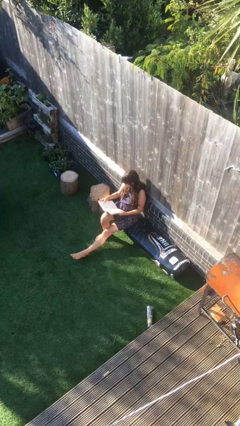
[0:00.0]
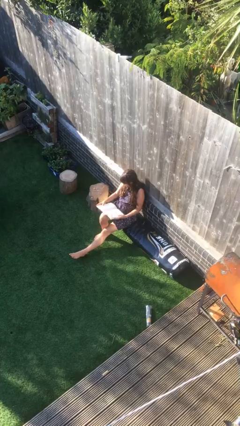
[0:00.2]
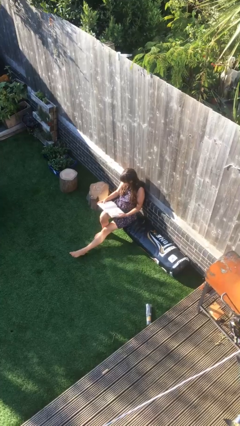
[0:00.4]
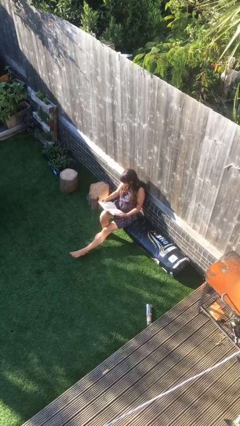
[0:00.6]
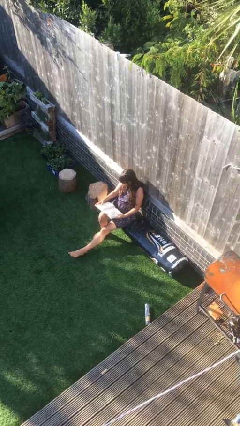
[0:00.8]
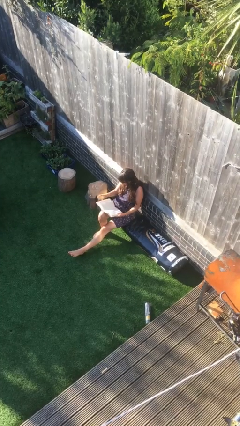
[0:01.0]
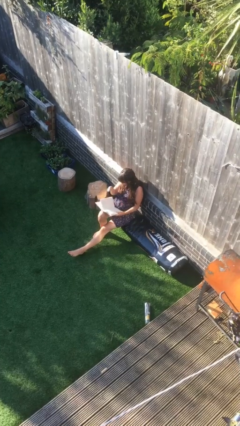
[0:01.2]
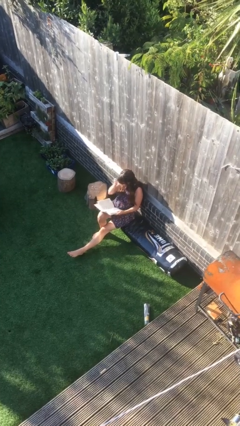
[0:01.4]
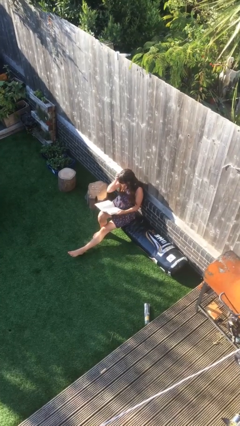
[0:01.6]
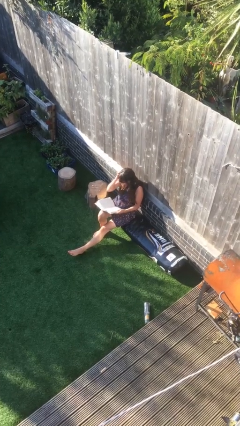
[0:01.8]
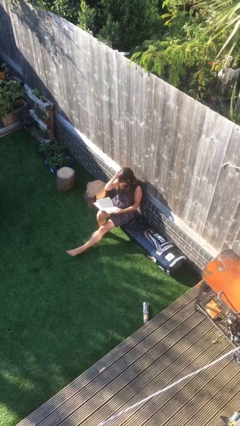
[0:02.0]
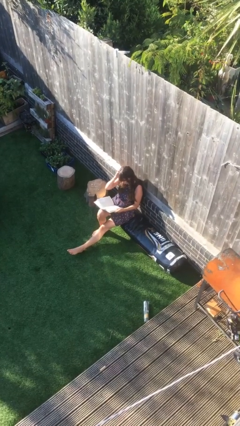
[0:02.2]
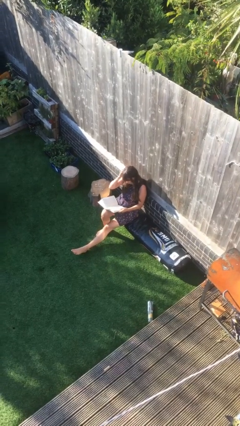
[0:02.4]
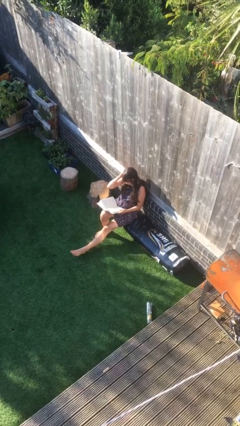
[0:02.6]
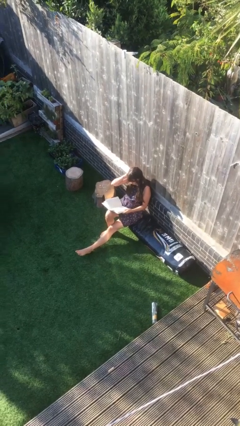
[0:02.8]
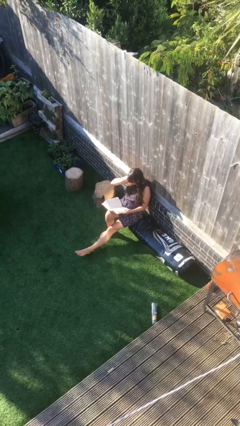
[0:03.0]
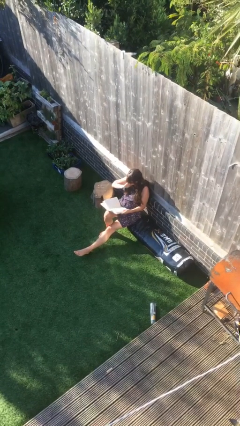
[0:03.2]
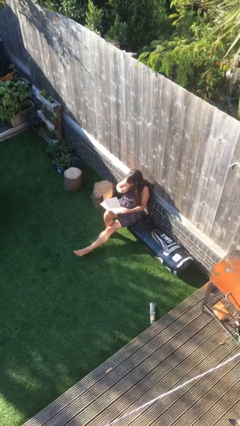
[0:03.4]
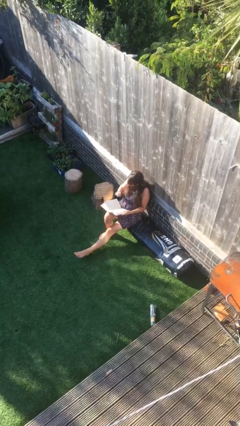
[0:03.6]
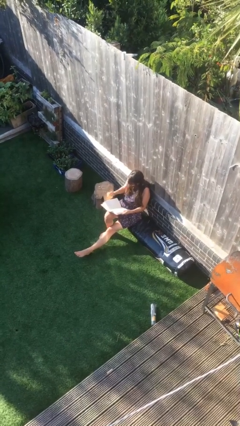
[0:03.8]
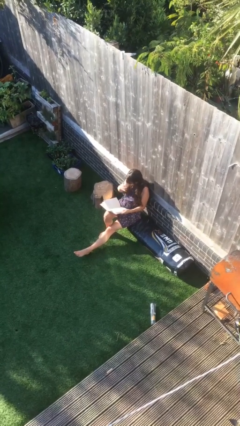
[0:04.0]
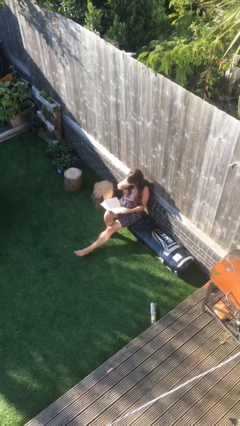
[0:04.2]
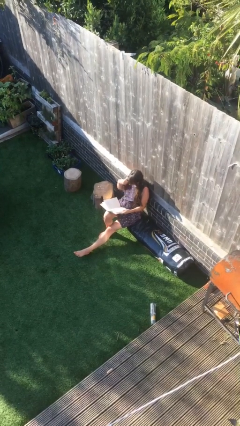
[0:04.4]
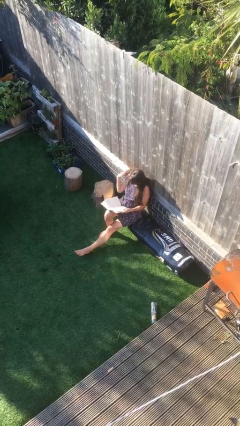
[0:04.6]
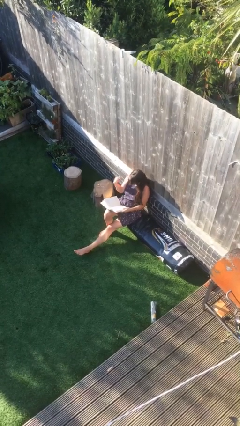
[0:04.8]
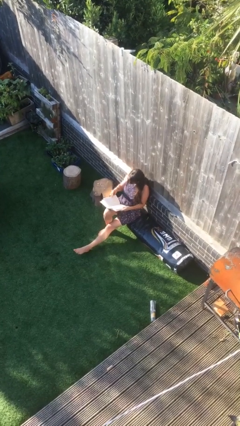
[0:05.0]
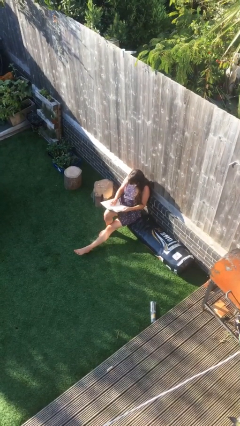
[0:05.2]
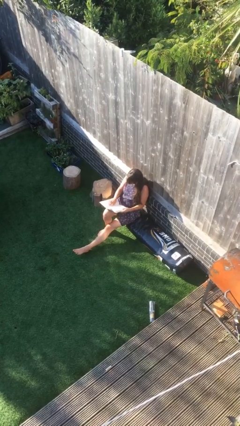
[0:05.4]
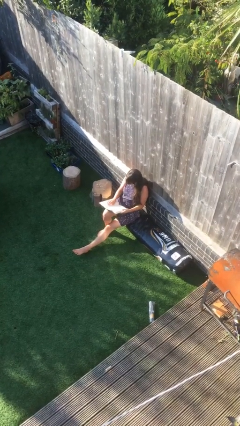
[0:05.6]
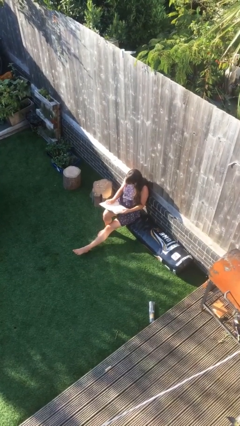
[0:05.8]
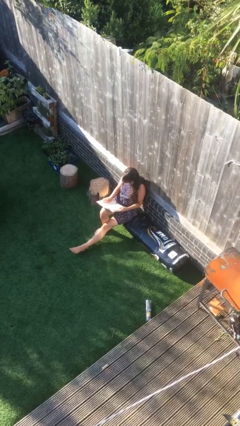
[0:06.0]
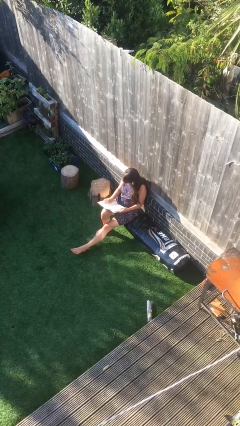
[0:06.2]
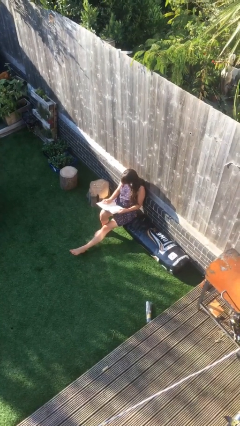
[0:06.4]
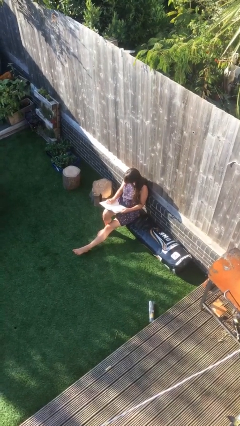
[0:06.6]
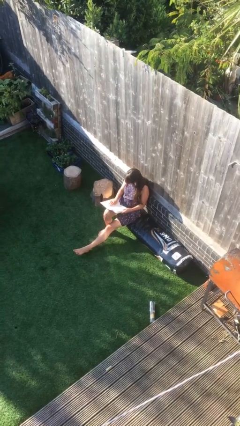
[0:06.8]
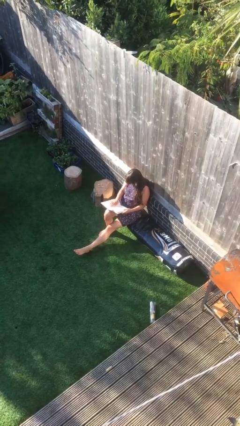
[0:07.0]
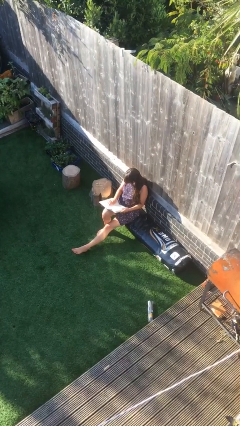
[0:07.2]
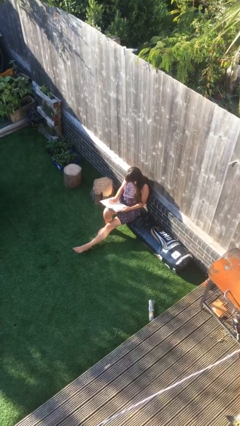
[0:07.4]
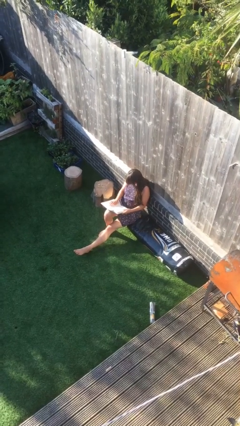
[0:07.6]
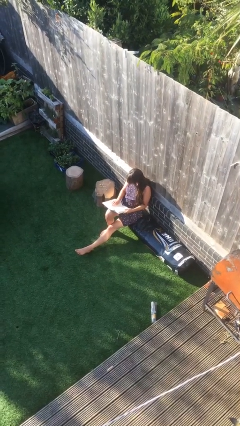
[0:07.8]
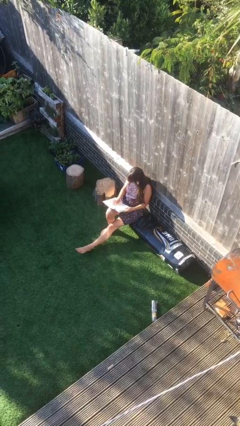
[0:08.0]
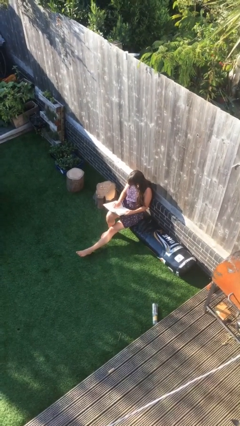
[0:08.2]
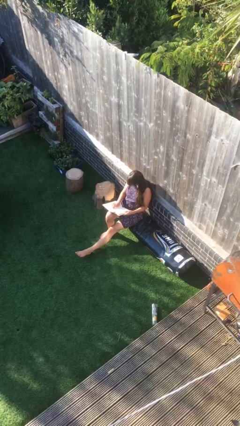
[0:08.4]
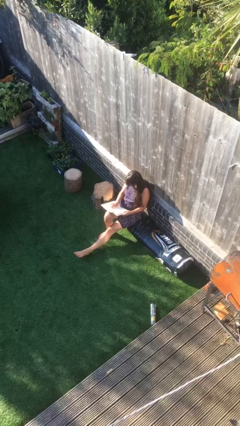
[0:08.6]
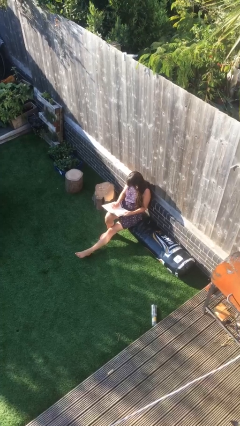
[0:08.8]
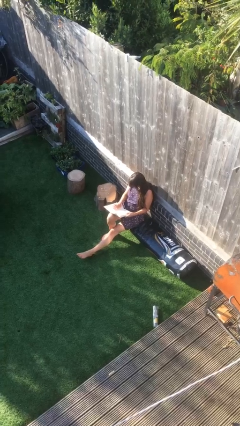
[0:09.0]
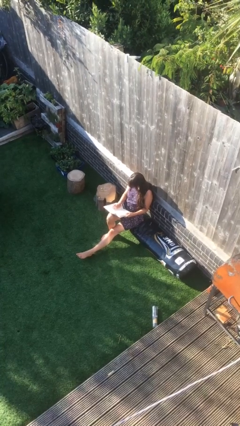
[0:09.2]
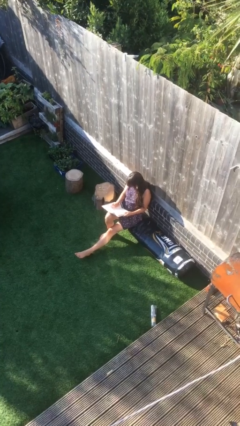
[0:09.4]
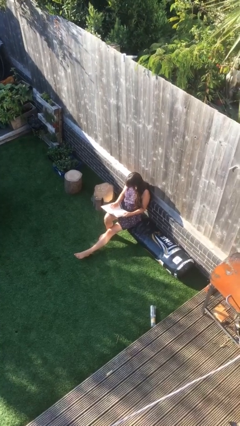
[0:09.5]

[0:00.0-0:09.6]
person reads document

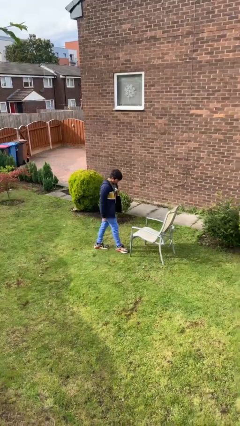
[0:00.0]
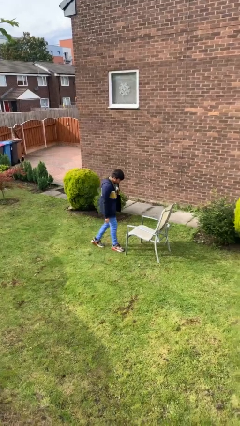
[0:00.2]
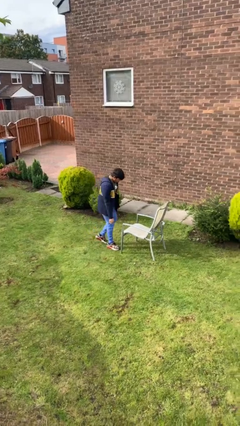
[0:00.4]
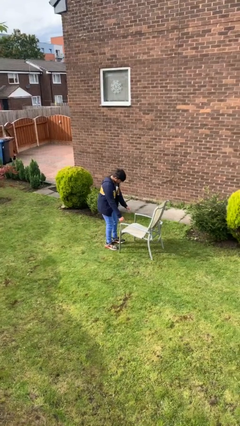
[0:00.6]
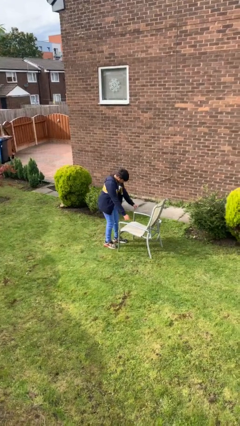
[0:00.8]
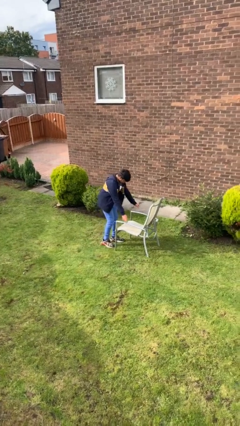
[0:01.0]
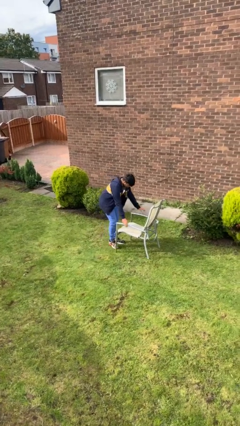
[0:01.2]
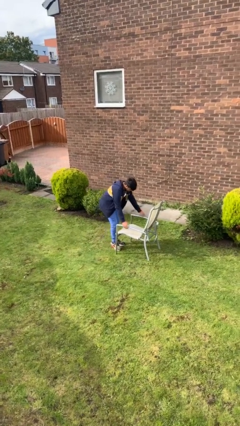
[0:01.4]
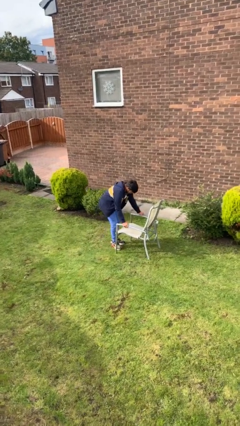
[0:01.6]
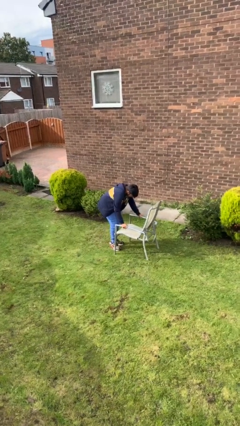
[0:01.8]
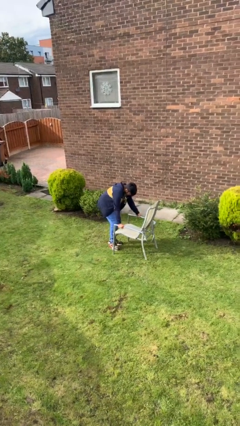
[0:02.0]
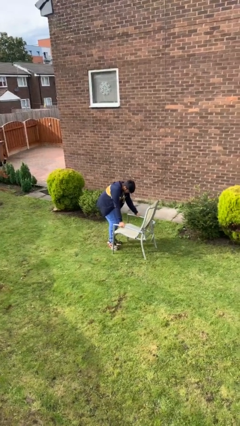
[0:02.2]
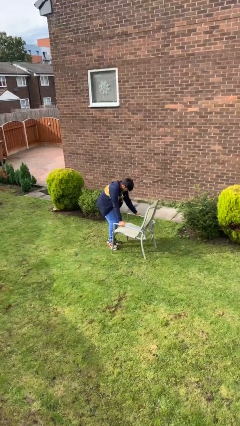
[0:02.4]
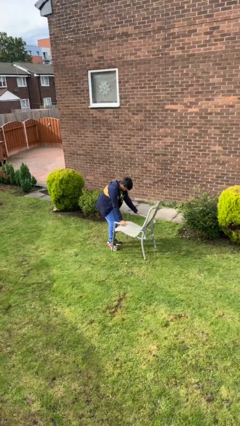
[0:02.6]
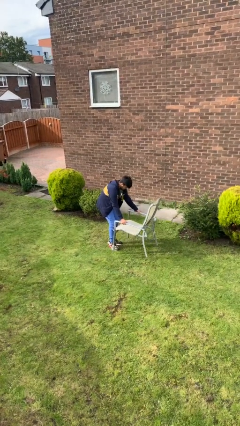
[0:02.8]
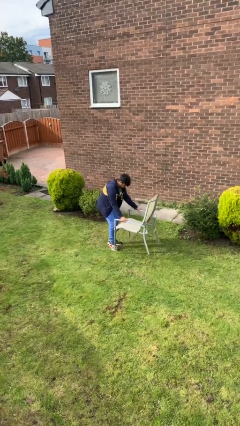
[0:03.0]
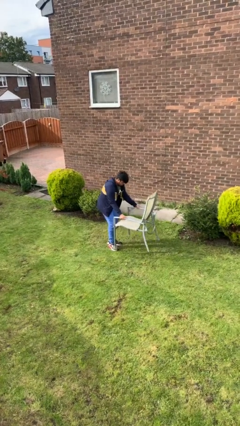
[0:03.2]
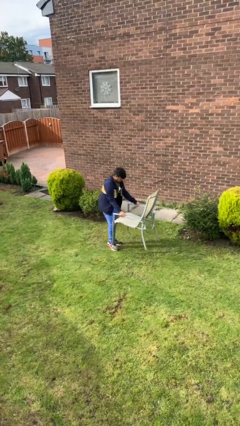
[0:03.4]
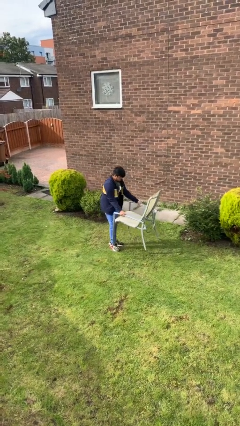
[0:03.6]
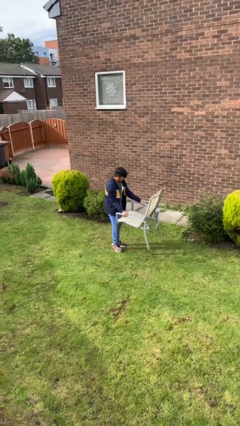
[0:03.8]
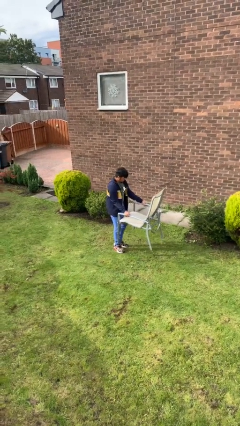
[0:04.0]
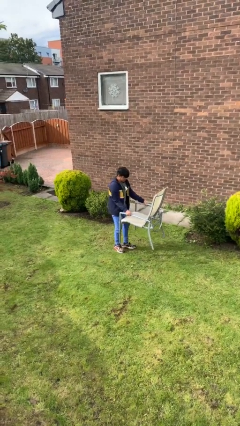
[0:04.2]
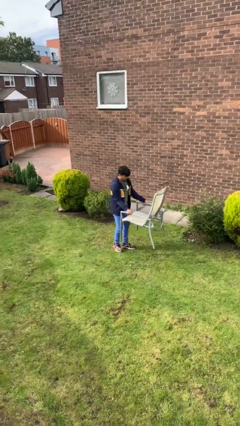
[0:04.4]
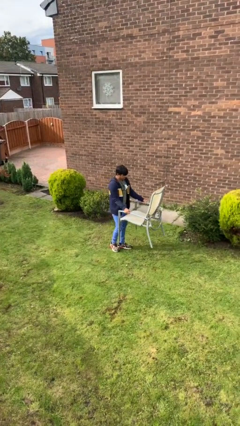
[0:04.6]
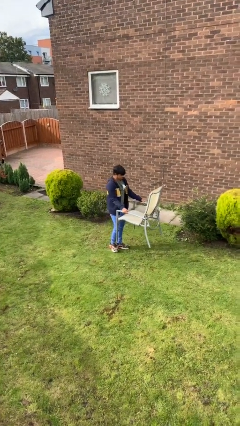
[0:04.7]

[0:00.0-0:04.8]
person picks up object from floor

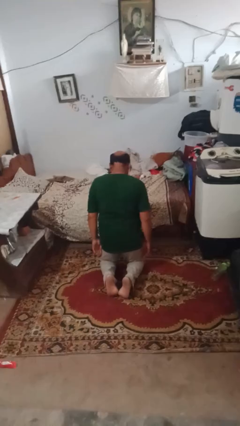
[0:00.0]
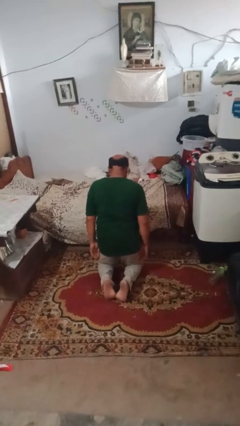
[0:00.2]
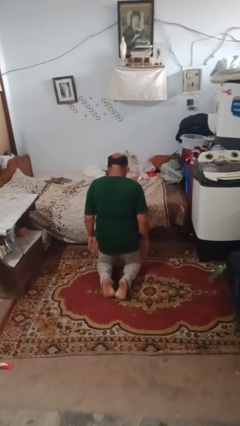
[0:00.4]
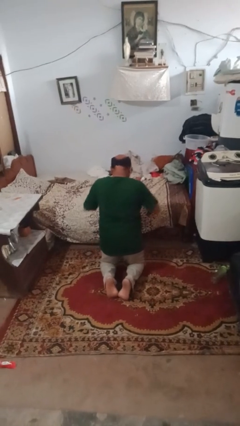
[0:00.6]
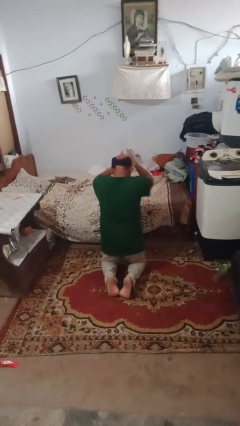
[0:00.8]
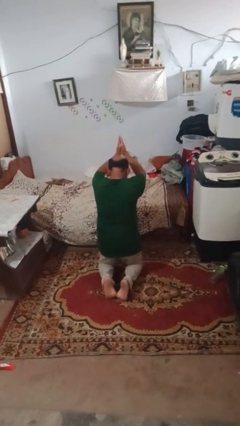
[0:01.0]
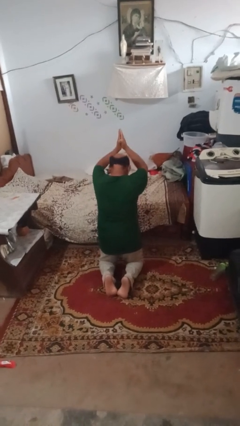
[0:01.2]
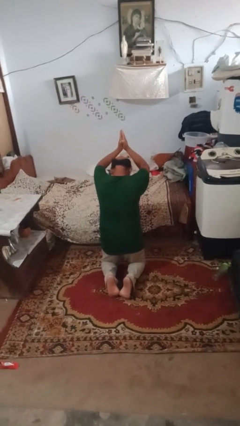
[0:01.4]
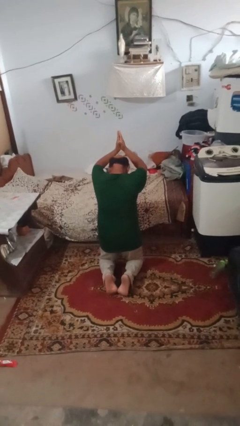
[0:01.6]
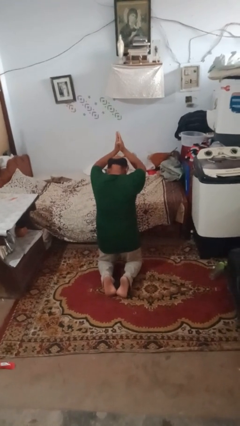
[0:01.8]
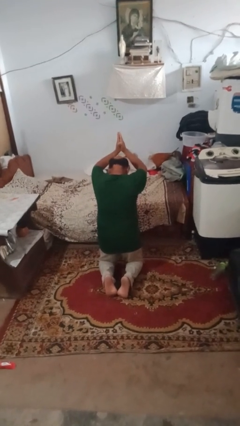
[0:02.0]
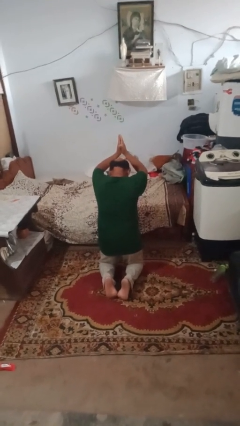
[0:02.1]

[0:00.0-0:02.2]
person prays

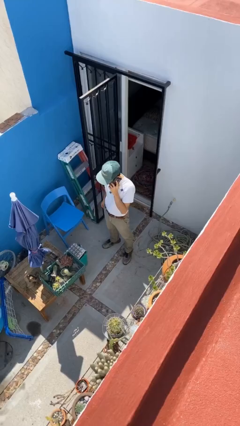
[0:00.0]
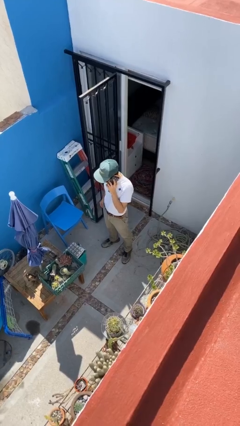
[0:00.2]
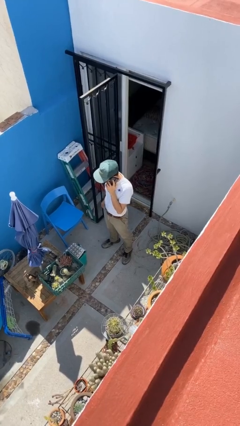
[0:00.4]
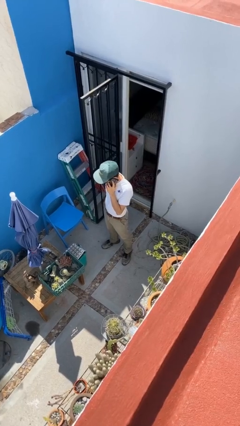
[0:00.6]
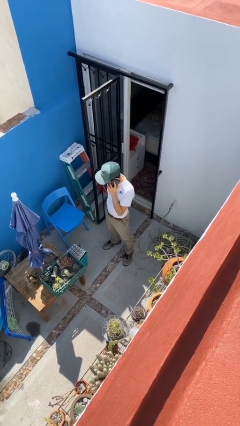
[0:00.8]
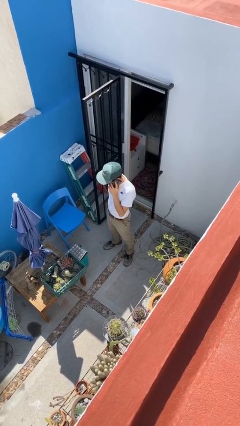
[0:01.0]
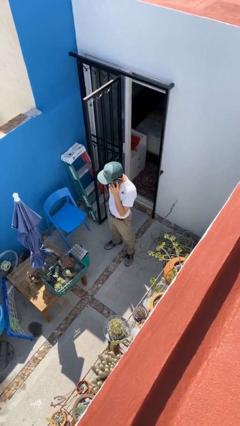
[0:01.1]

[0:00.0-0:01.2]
person enters scene through structure

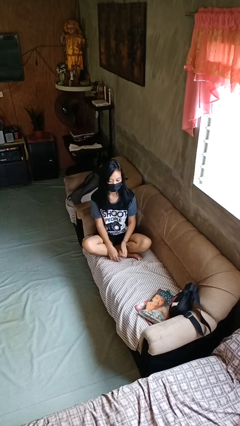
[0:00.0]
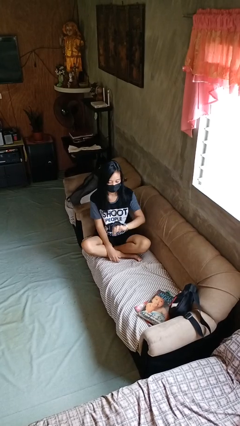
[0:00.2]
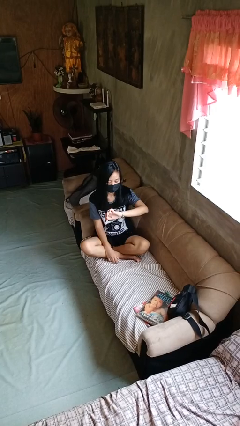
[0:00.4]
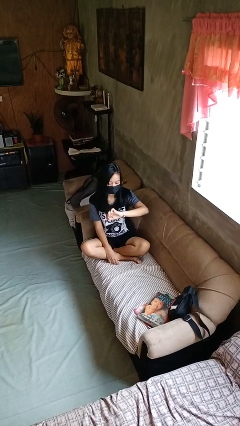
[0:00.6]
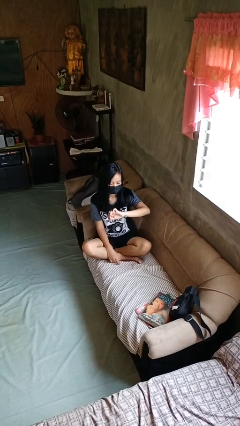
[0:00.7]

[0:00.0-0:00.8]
person looks at wristwatch
